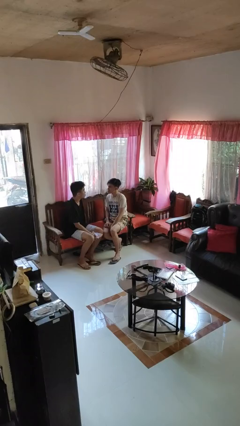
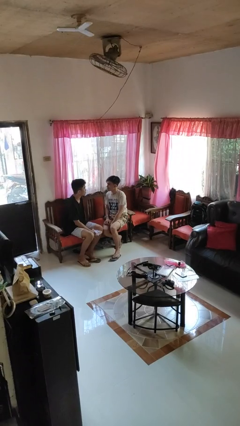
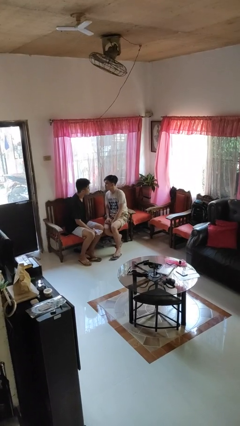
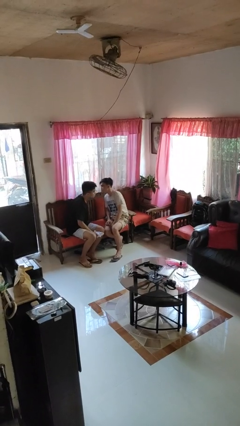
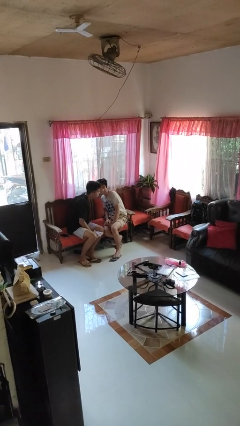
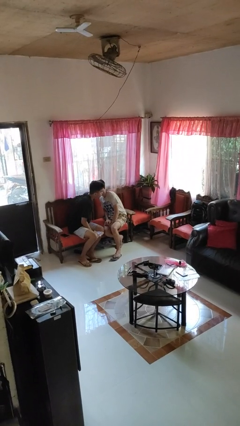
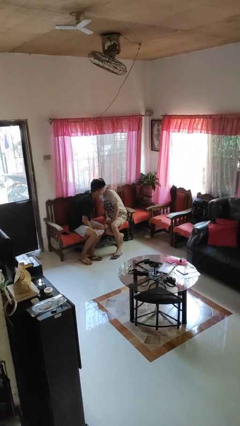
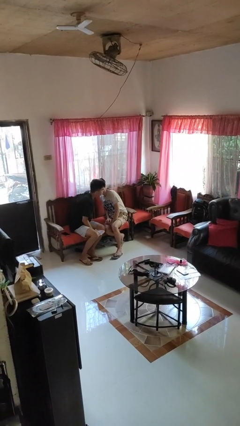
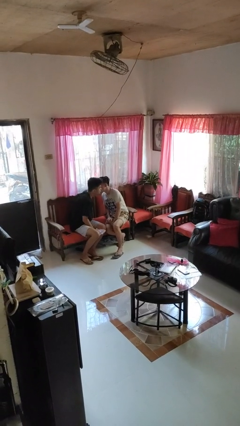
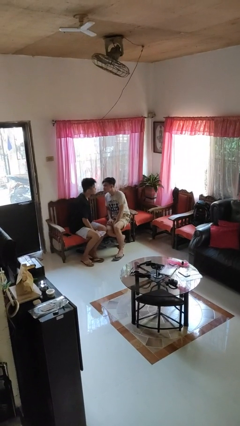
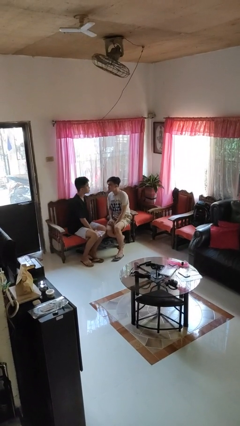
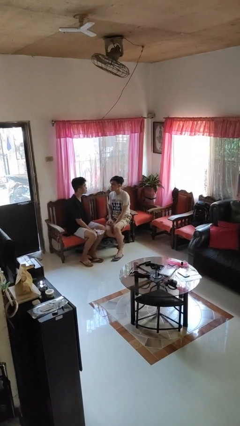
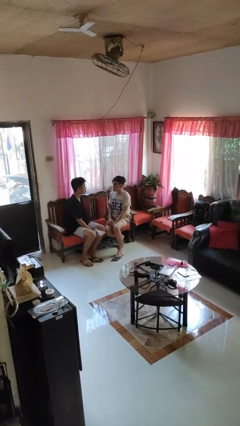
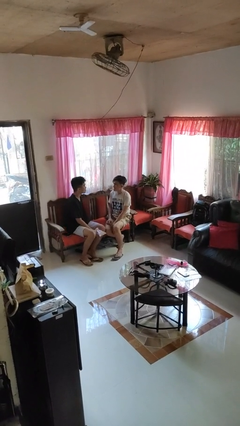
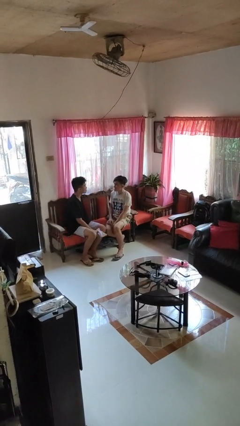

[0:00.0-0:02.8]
person kisses cheek of person

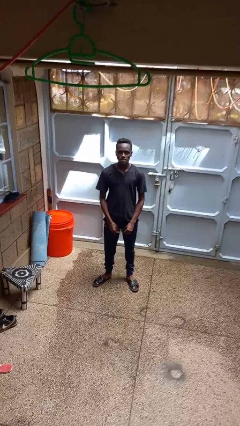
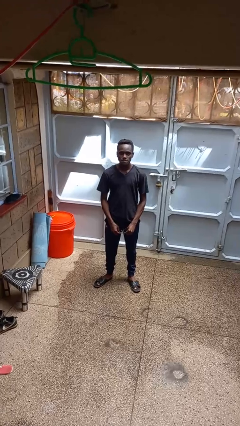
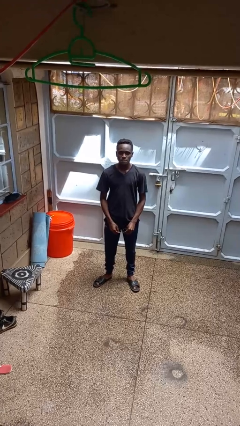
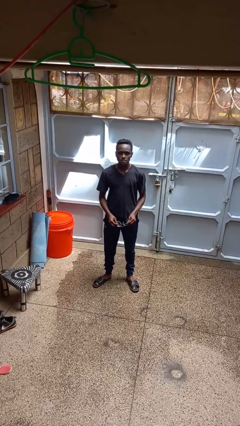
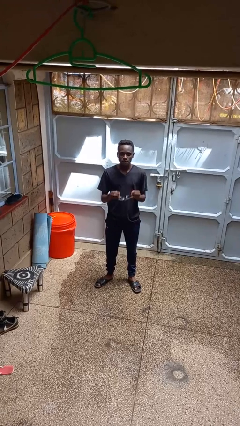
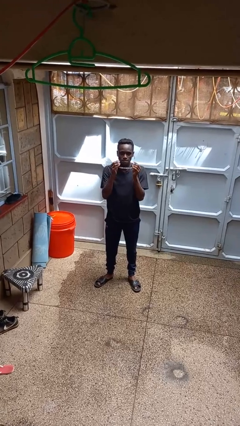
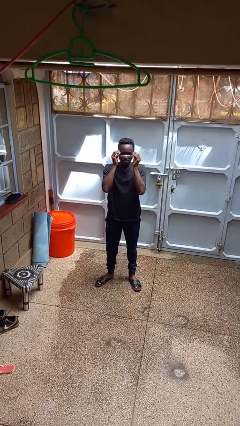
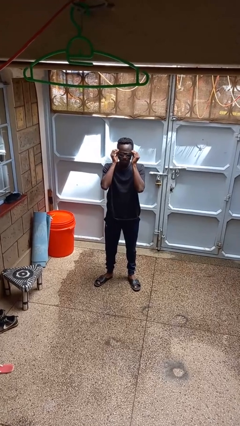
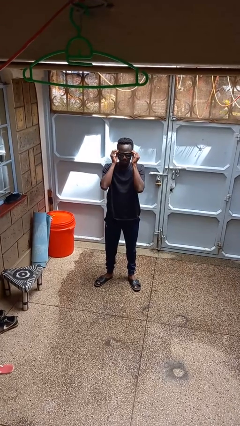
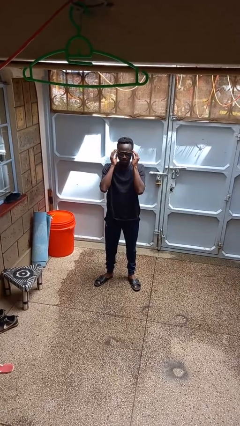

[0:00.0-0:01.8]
person puts on sunglasses

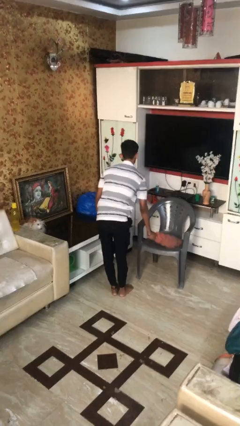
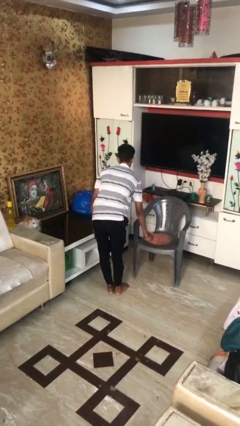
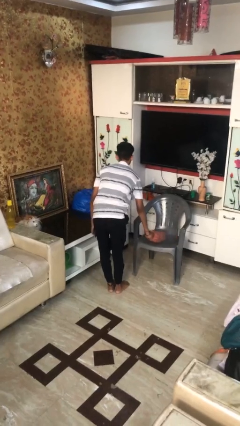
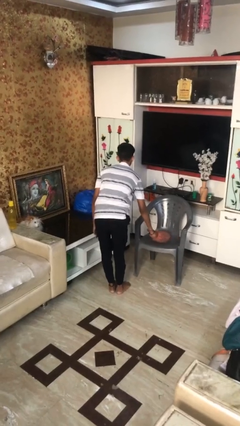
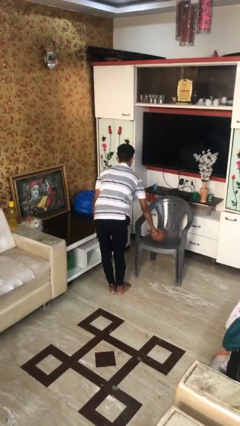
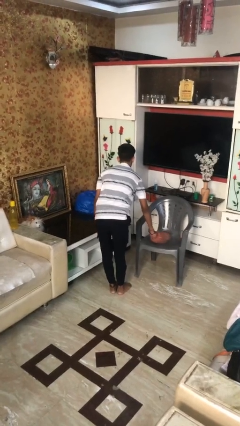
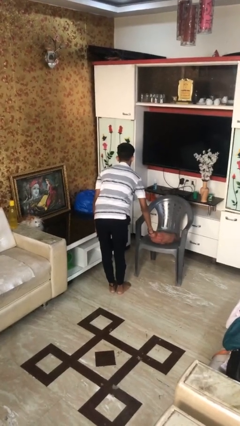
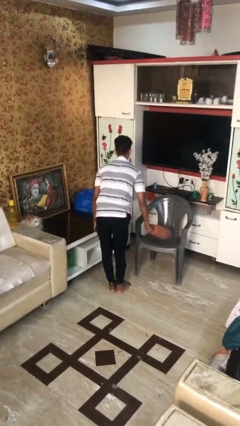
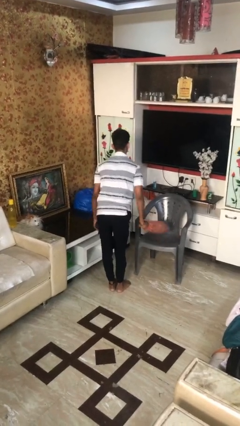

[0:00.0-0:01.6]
person dusts furniture

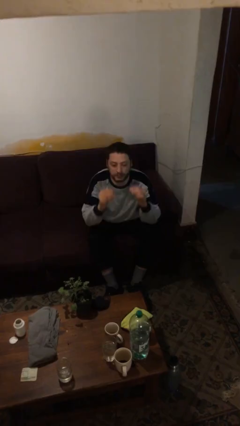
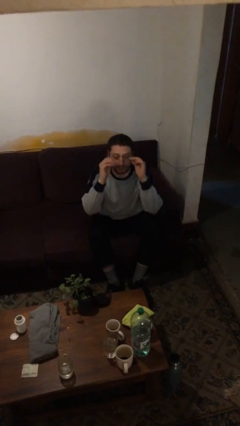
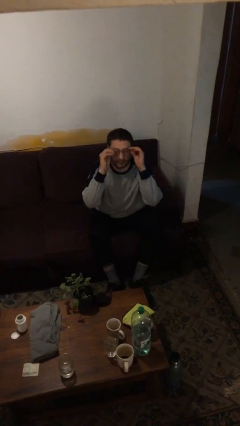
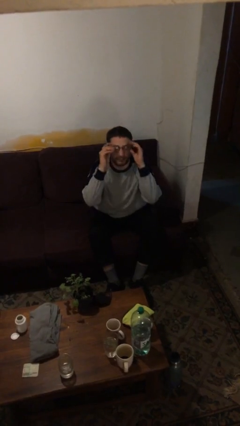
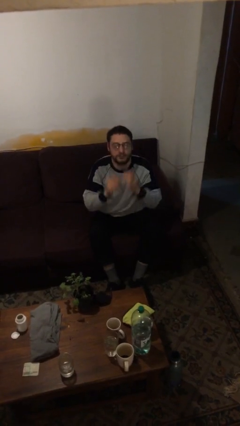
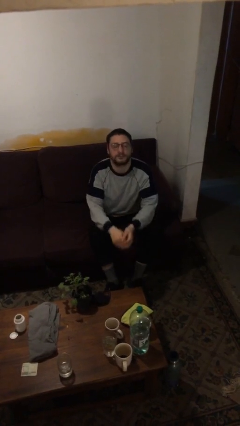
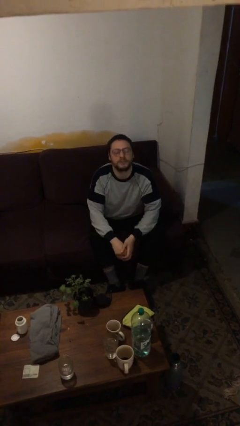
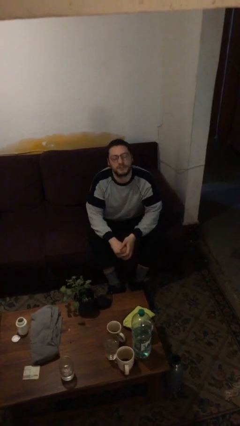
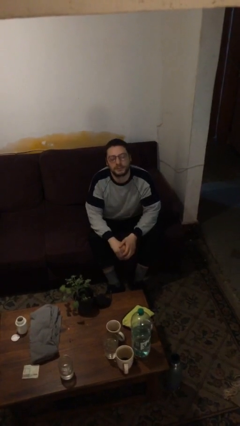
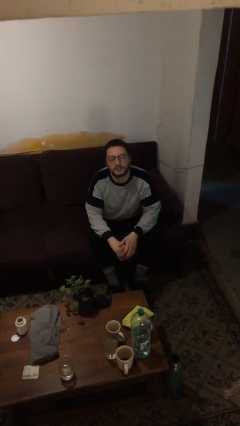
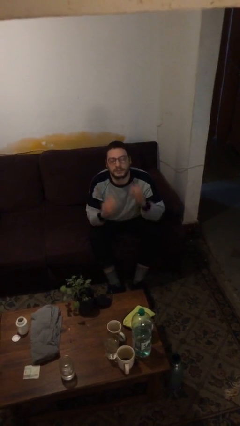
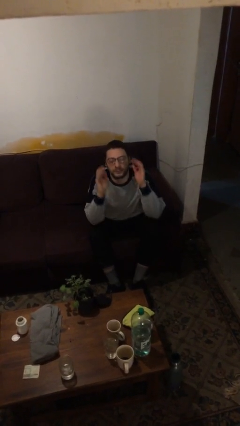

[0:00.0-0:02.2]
person puts on glasses

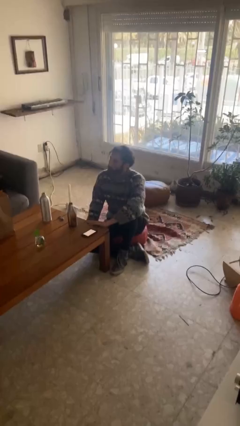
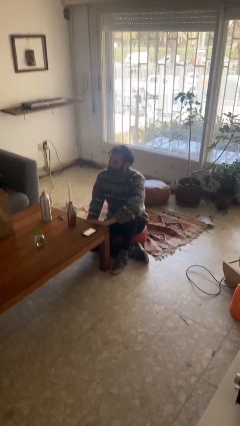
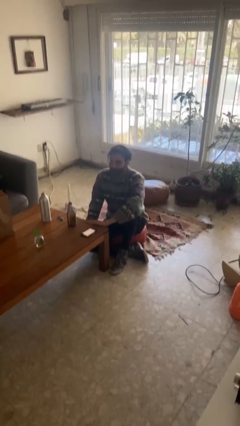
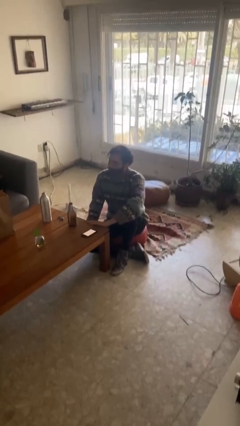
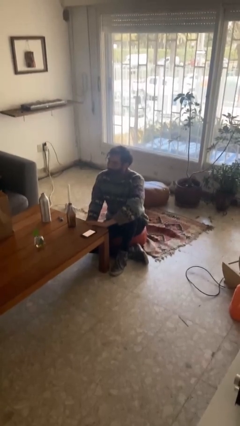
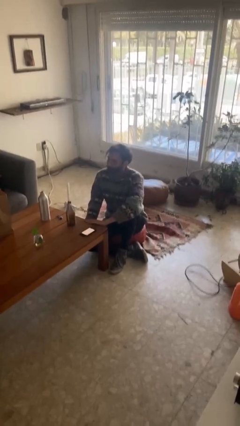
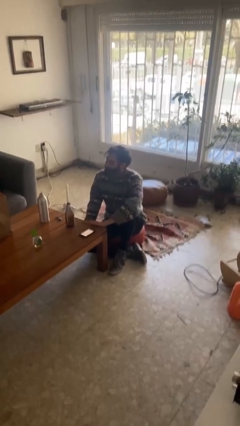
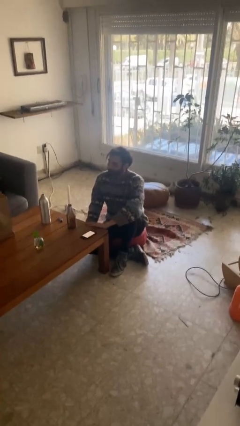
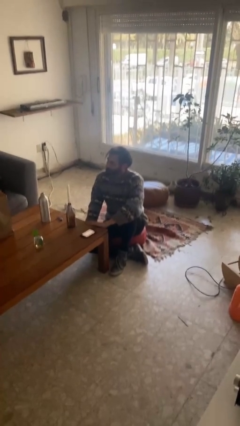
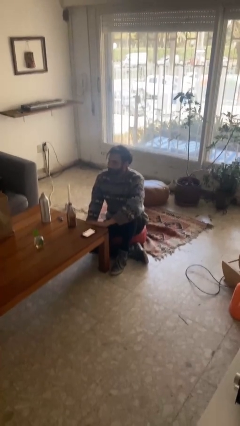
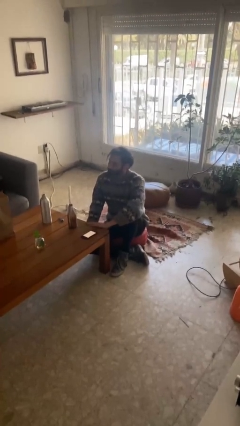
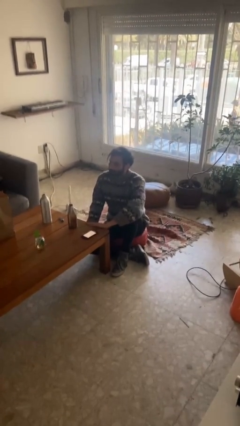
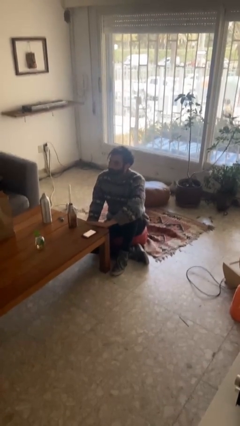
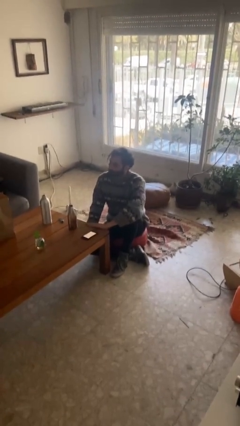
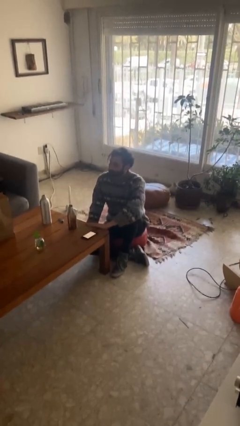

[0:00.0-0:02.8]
person shakes head

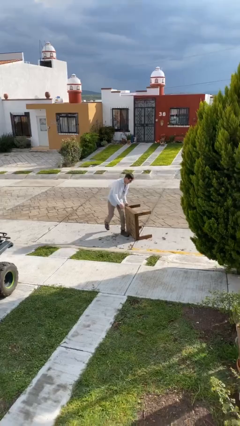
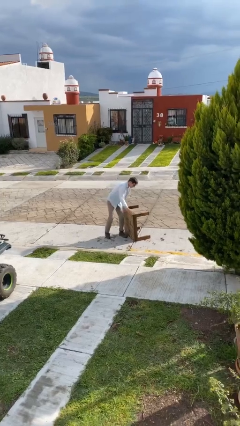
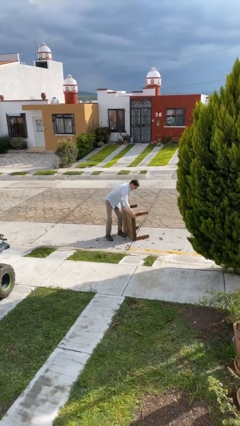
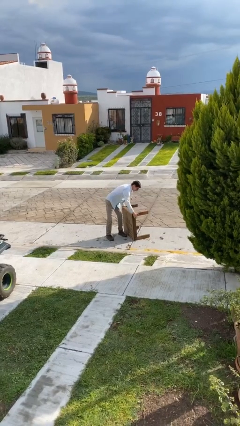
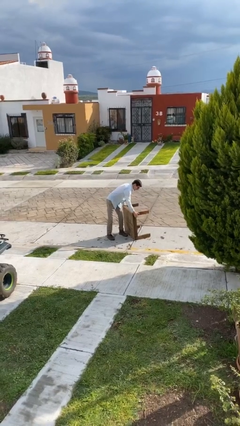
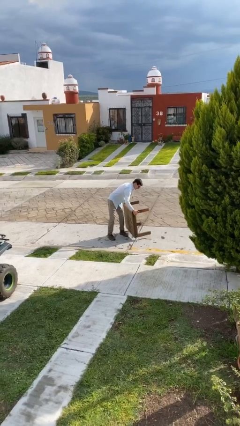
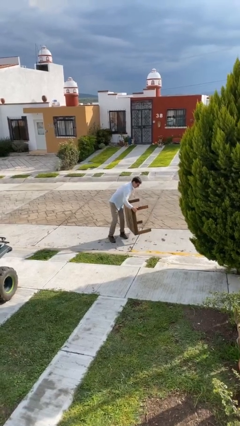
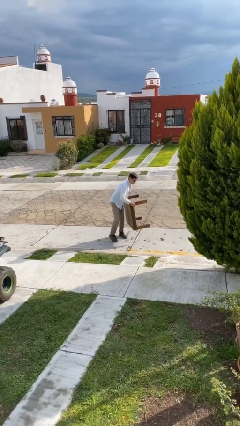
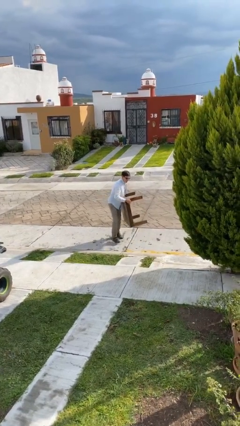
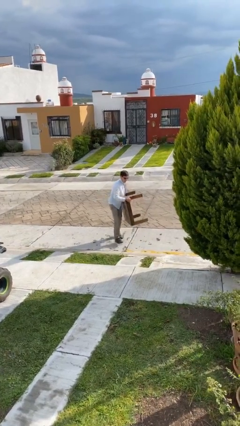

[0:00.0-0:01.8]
person picks up object from floor

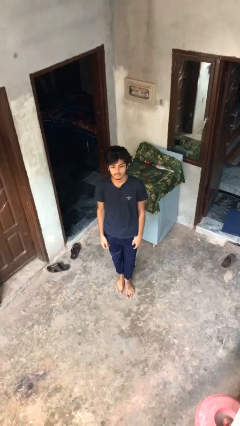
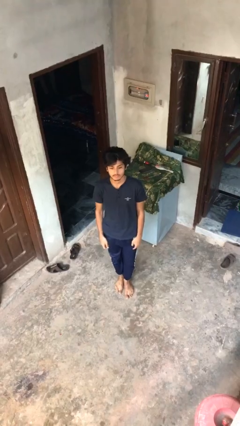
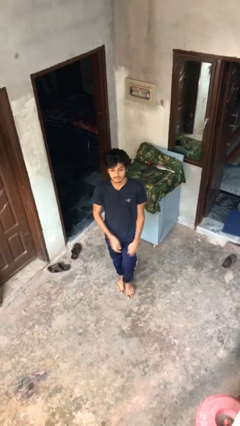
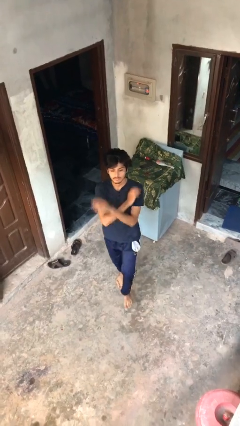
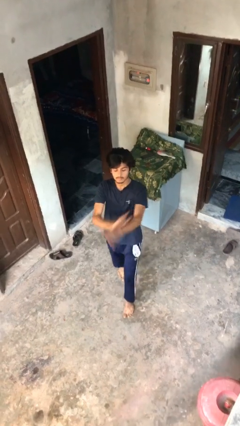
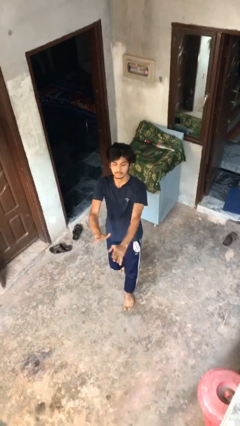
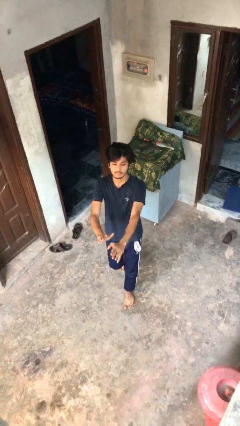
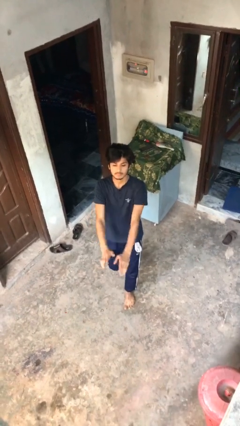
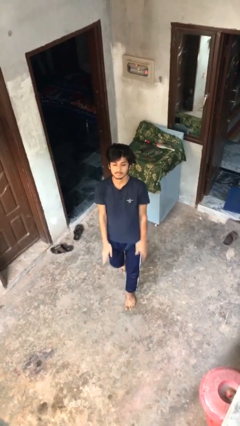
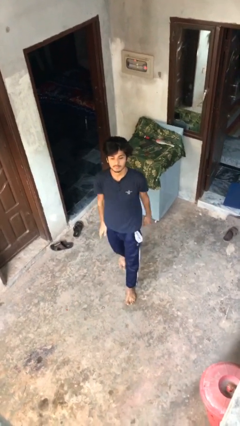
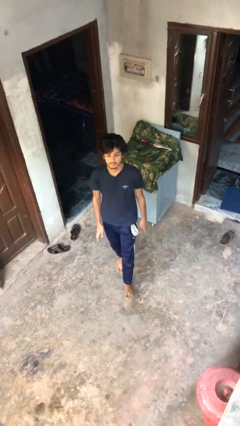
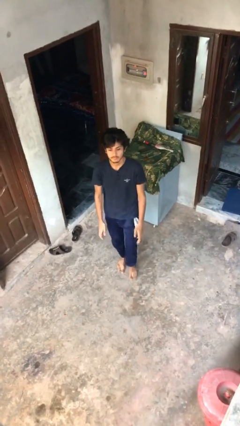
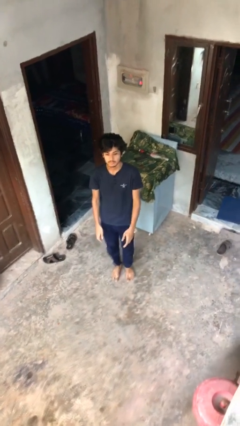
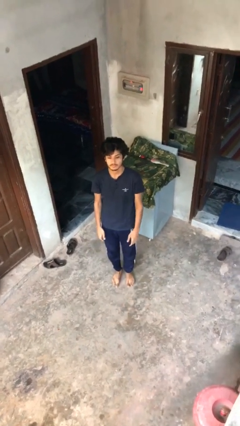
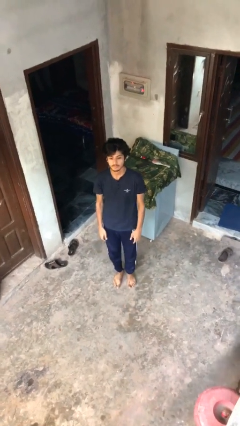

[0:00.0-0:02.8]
person karate chop

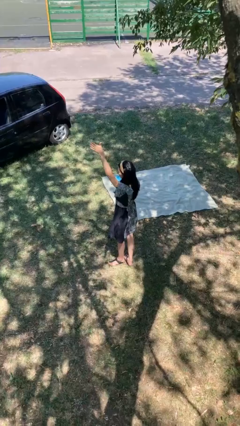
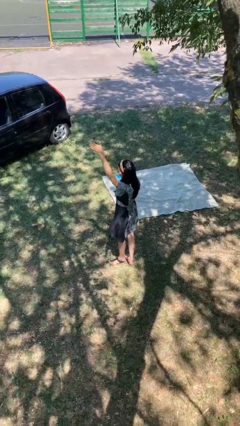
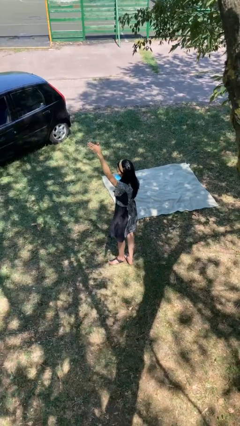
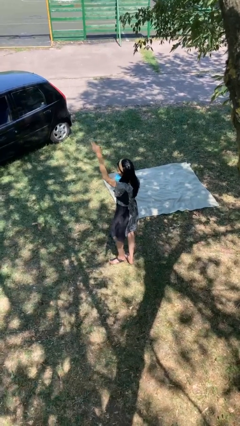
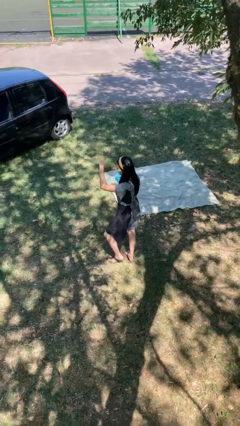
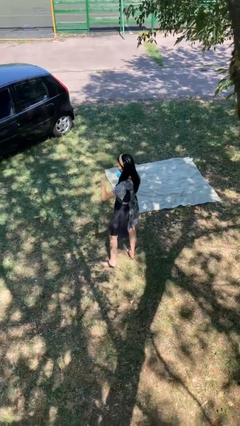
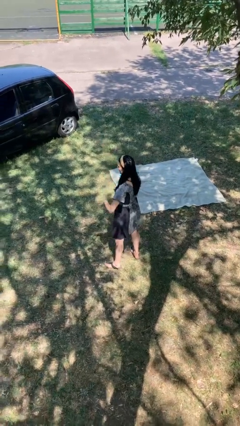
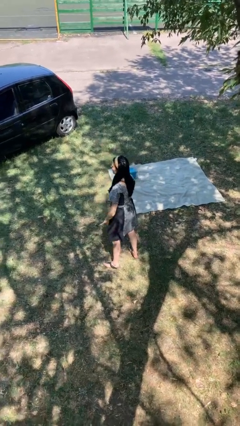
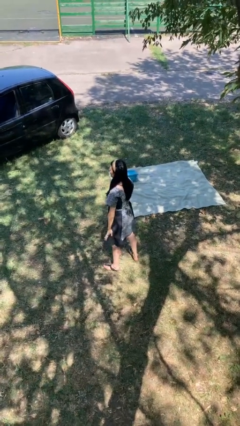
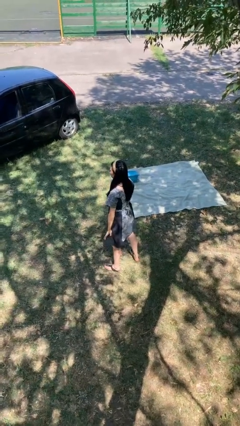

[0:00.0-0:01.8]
person gestures lower hand
